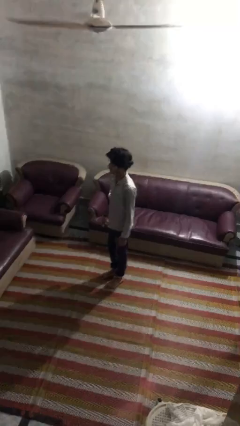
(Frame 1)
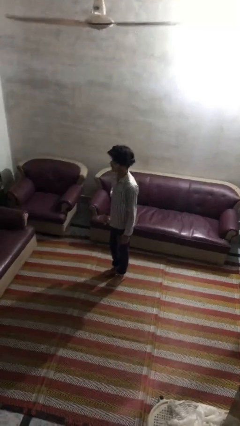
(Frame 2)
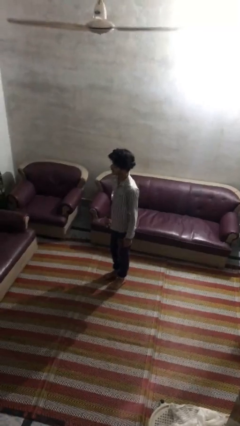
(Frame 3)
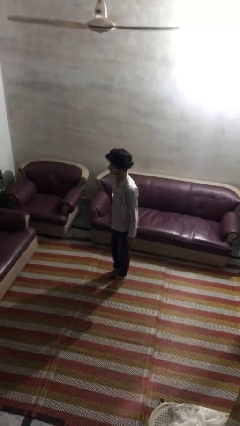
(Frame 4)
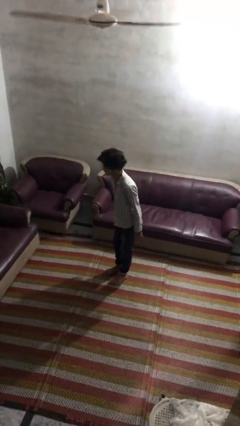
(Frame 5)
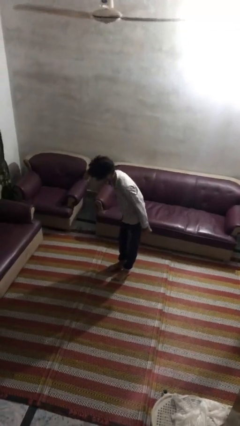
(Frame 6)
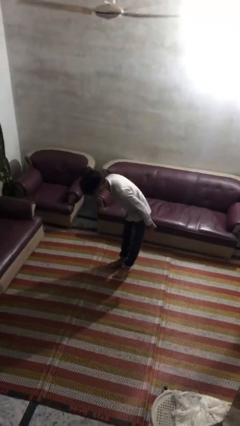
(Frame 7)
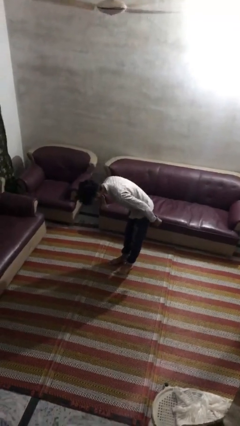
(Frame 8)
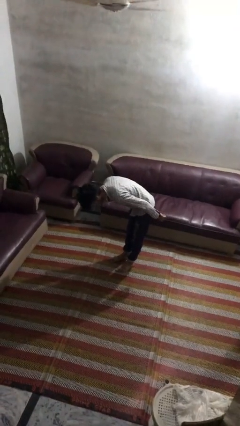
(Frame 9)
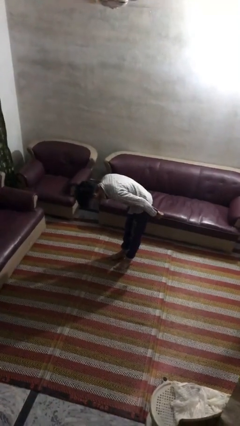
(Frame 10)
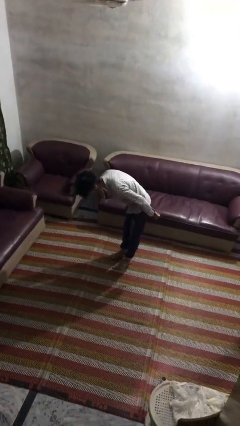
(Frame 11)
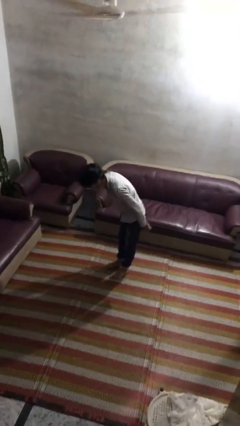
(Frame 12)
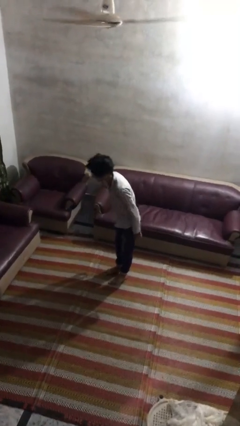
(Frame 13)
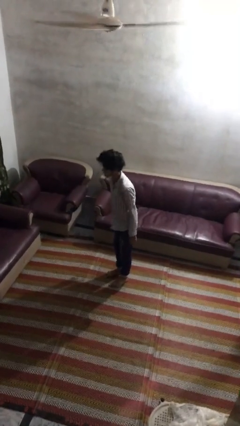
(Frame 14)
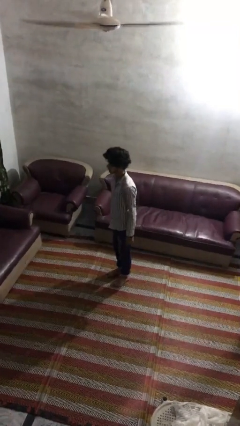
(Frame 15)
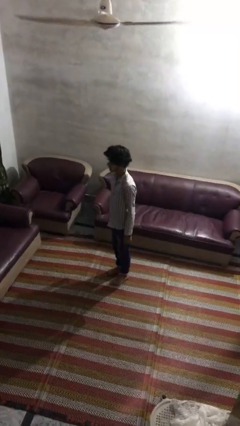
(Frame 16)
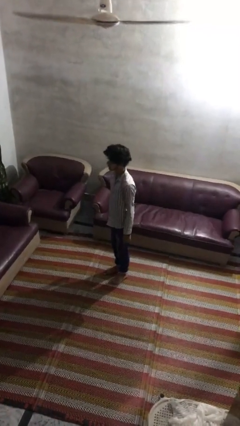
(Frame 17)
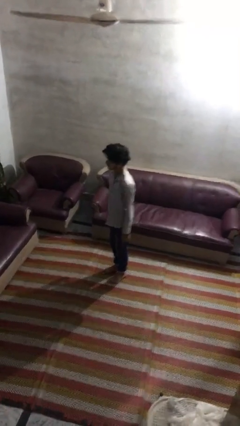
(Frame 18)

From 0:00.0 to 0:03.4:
person bows

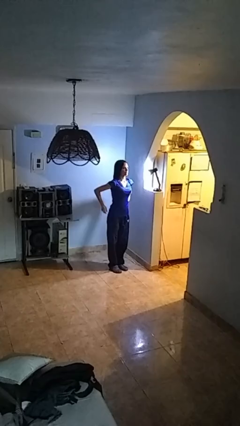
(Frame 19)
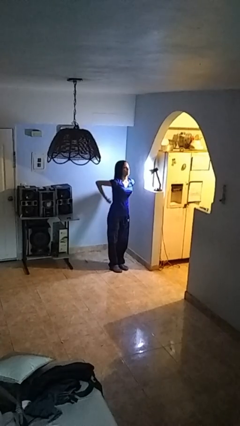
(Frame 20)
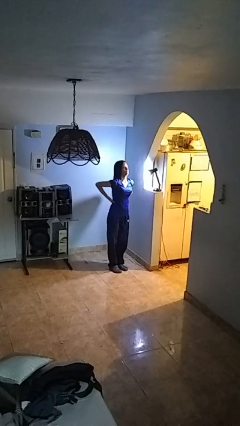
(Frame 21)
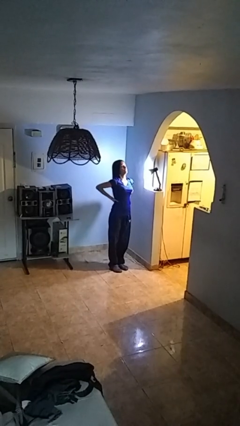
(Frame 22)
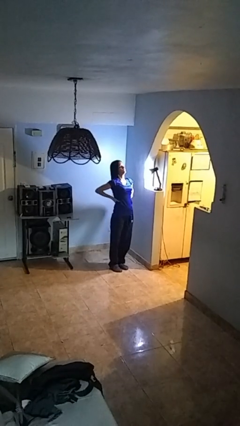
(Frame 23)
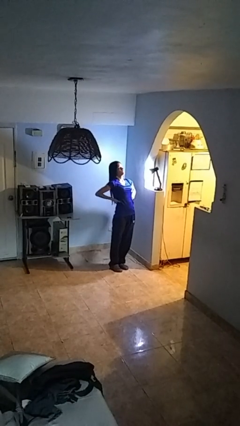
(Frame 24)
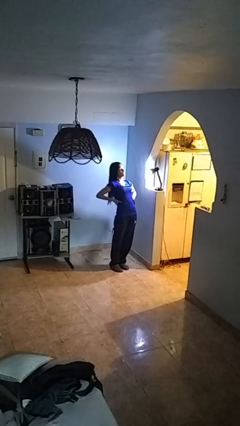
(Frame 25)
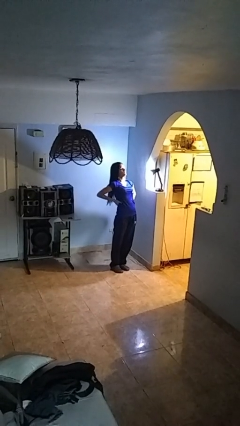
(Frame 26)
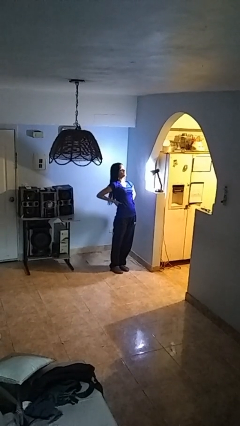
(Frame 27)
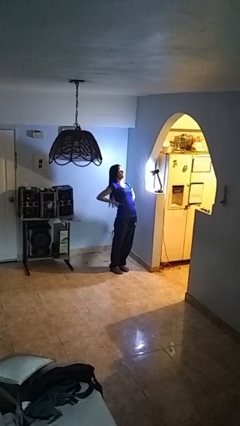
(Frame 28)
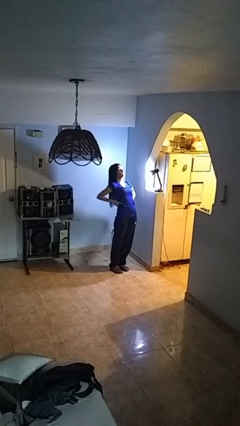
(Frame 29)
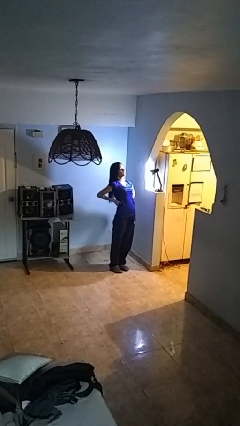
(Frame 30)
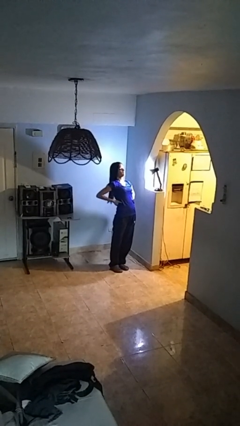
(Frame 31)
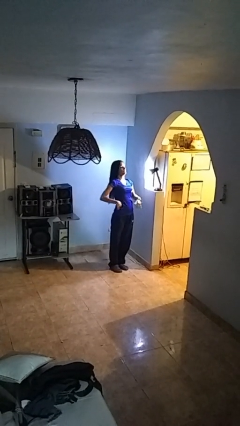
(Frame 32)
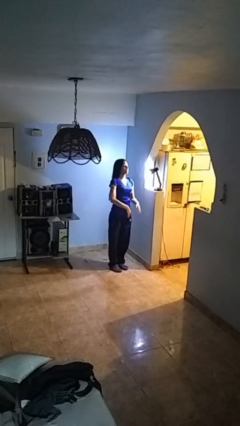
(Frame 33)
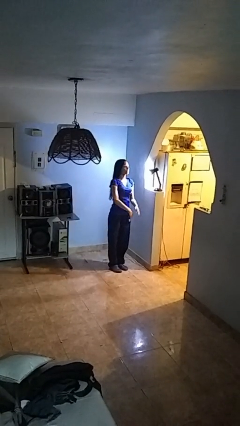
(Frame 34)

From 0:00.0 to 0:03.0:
person stretches back

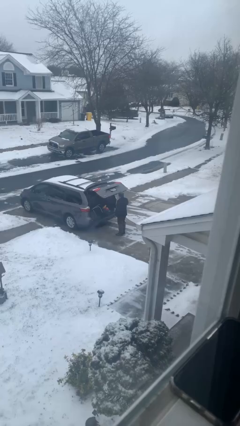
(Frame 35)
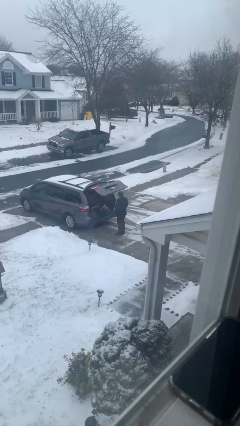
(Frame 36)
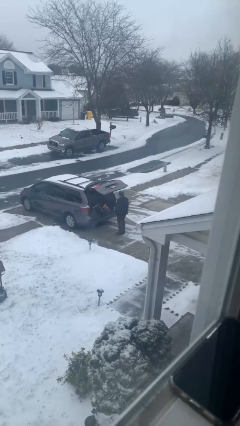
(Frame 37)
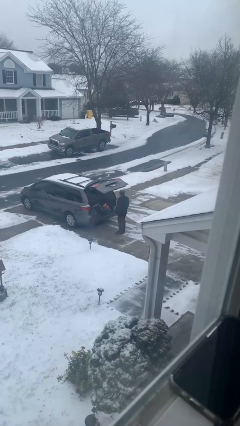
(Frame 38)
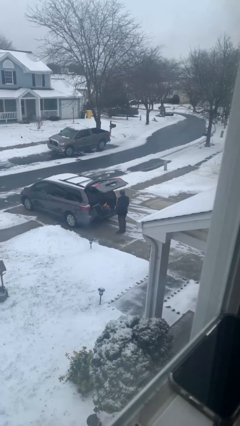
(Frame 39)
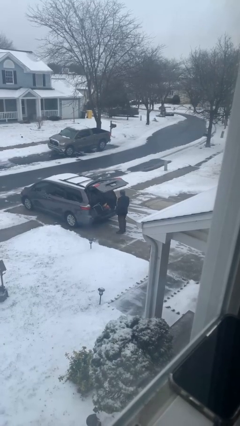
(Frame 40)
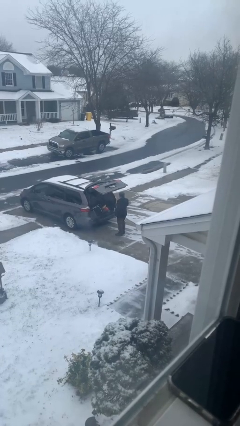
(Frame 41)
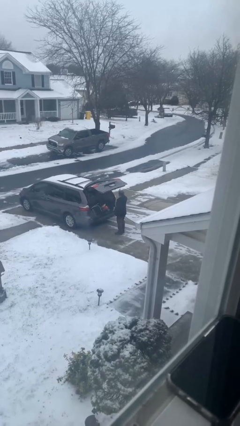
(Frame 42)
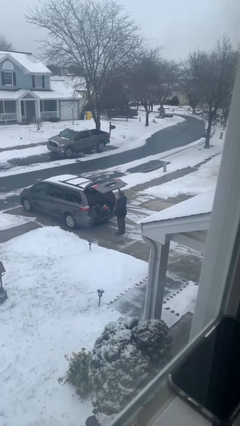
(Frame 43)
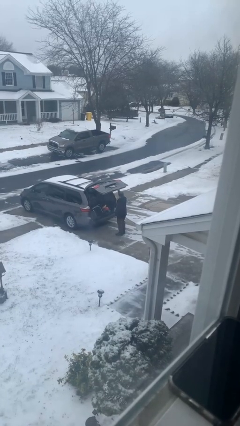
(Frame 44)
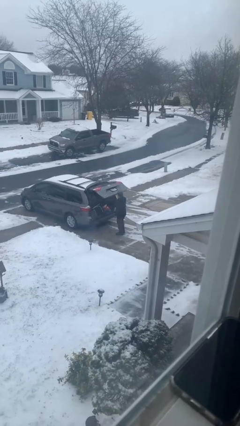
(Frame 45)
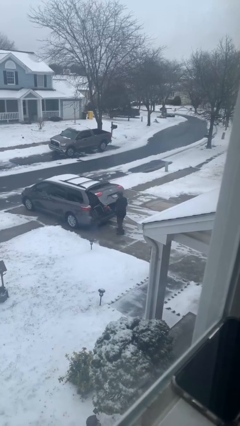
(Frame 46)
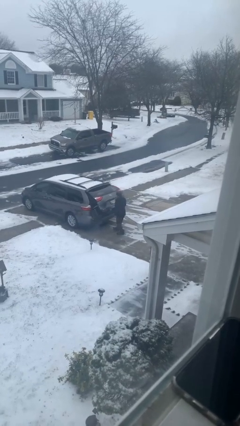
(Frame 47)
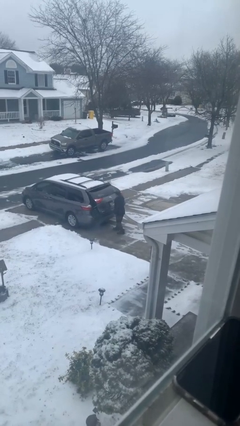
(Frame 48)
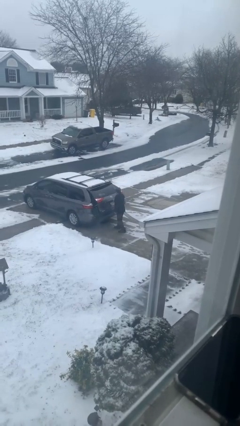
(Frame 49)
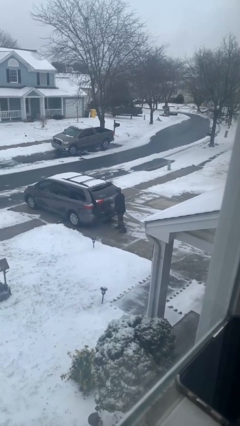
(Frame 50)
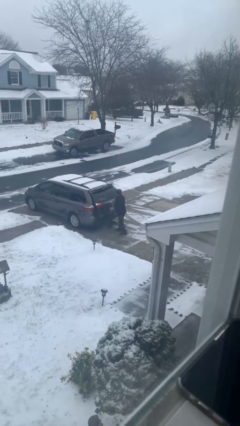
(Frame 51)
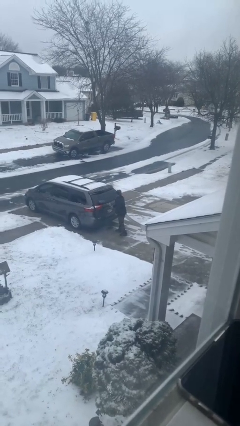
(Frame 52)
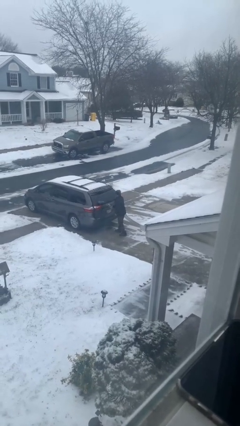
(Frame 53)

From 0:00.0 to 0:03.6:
person closes car trunk

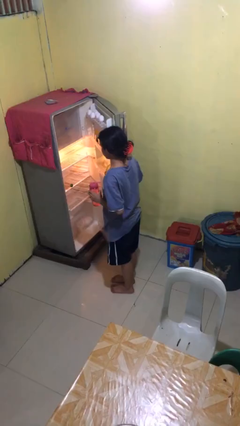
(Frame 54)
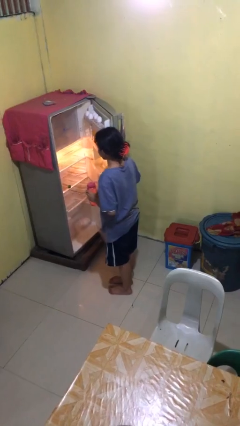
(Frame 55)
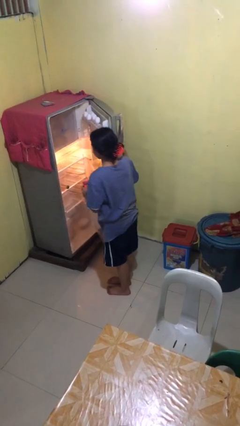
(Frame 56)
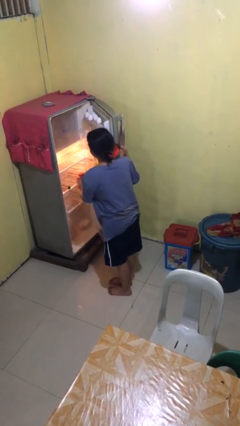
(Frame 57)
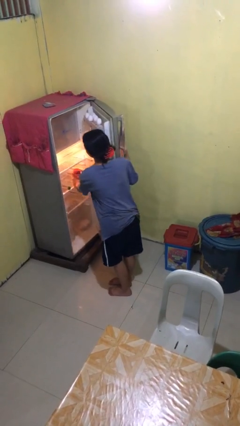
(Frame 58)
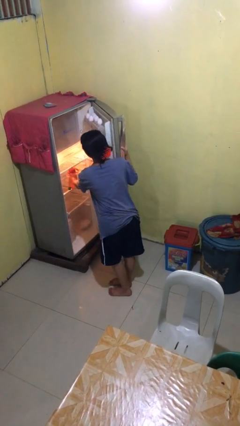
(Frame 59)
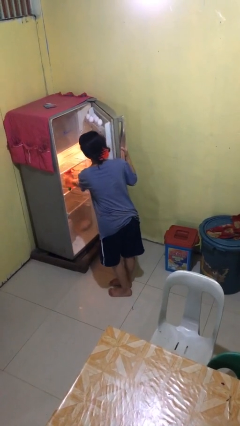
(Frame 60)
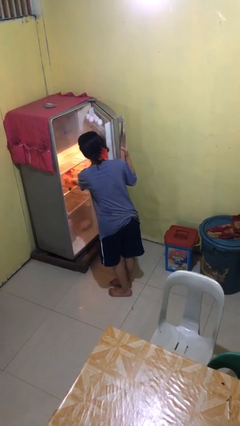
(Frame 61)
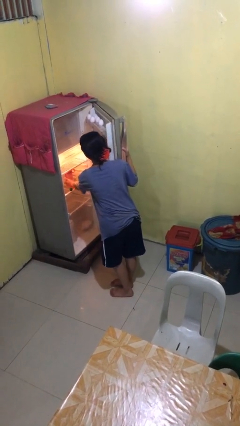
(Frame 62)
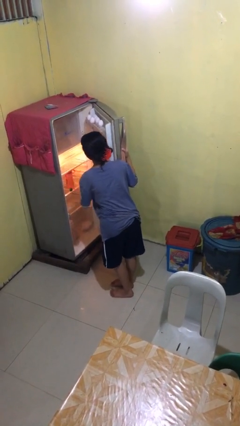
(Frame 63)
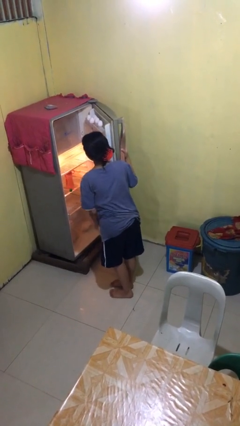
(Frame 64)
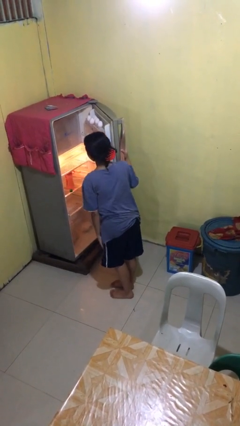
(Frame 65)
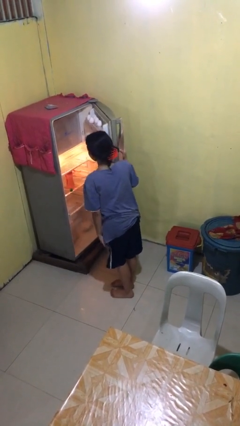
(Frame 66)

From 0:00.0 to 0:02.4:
person puts object into refrigerator

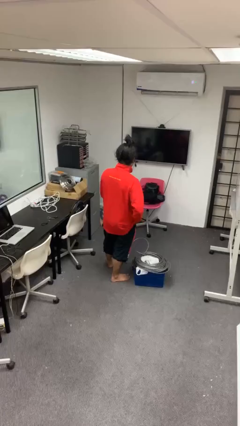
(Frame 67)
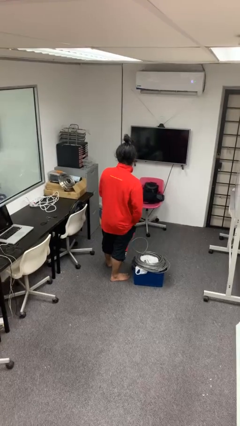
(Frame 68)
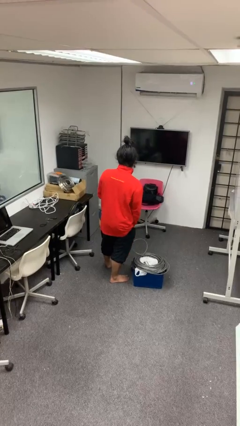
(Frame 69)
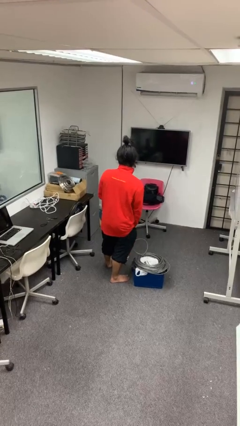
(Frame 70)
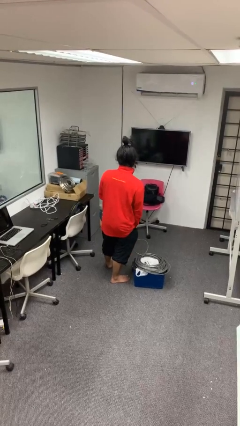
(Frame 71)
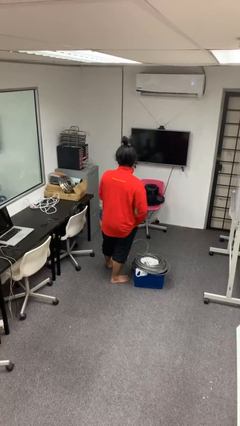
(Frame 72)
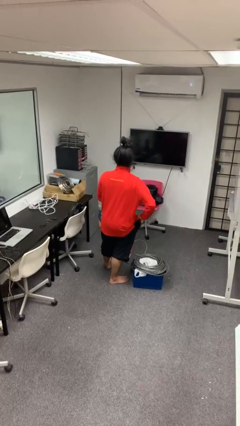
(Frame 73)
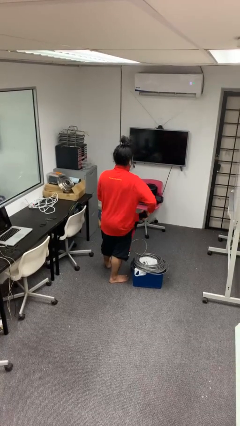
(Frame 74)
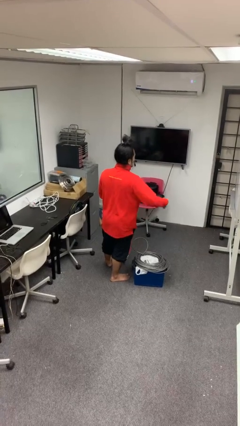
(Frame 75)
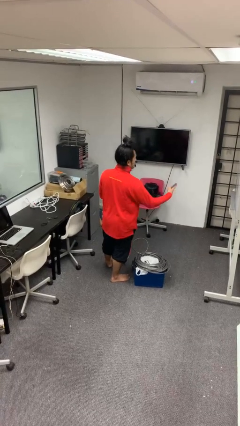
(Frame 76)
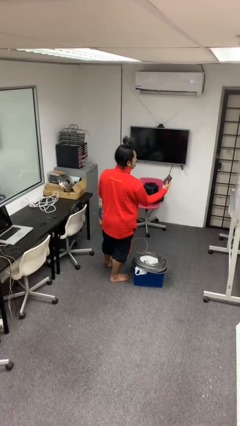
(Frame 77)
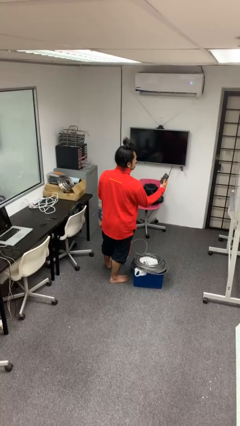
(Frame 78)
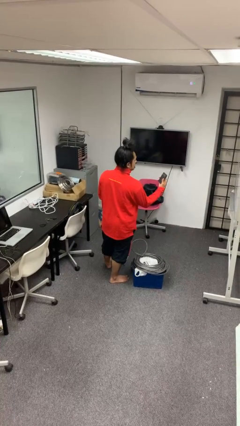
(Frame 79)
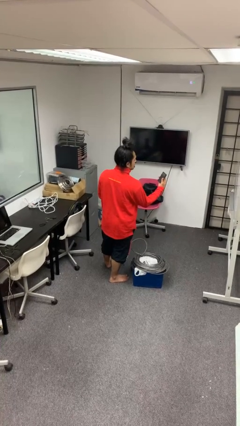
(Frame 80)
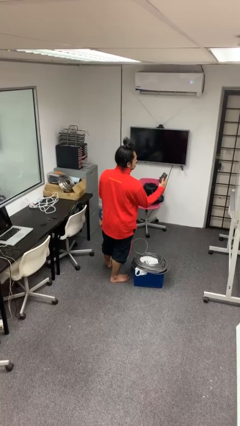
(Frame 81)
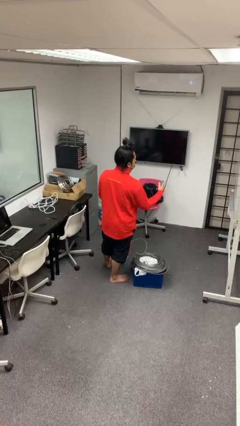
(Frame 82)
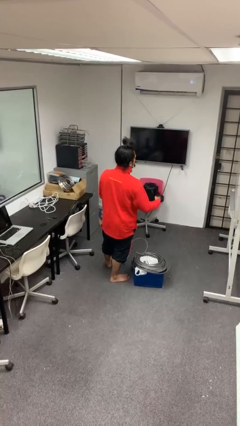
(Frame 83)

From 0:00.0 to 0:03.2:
person takes phone from pocket

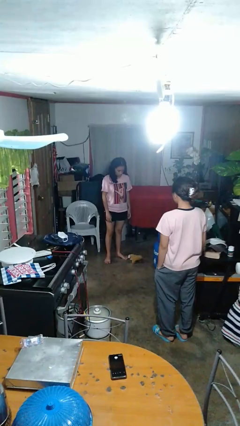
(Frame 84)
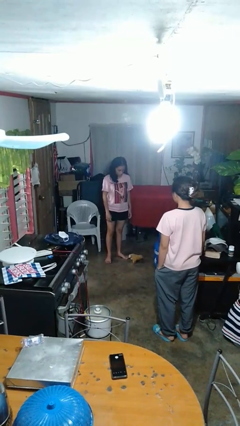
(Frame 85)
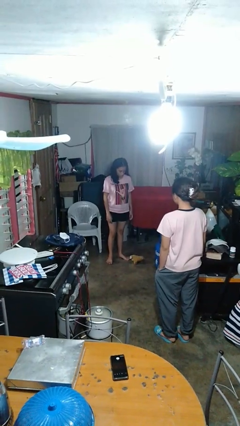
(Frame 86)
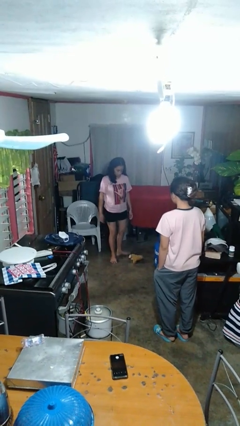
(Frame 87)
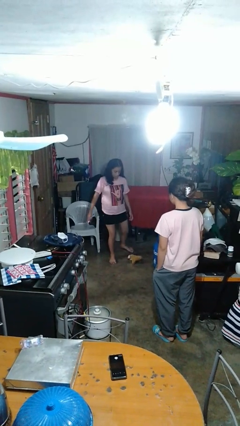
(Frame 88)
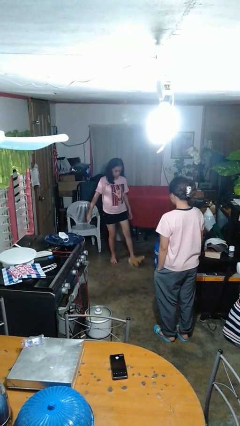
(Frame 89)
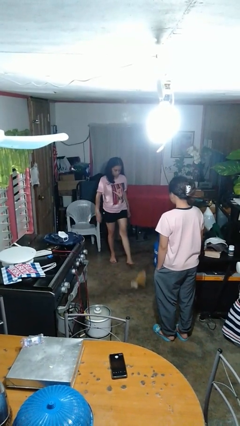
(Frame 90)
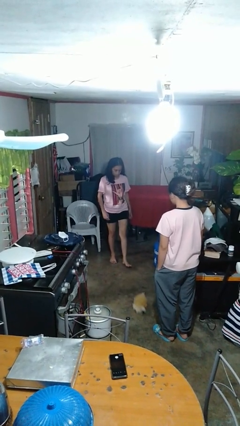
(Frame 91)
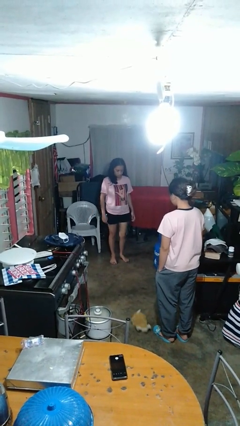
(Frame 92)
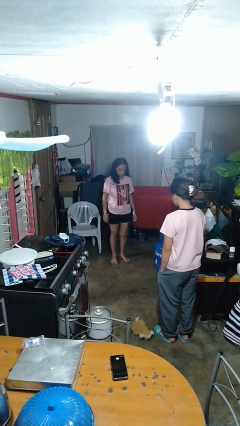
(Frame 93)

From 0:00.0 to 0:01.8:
person kicks object to person
